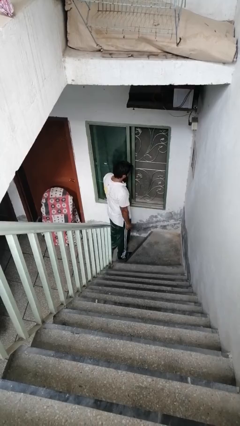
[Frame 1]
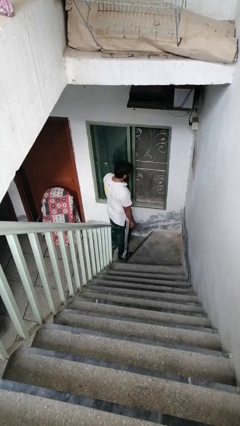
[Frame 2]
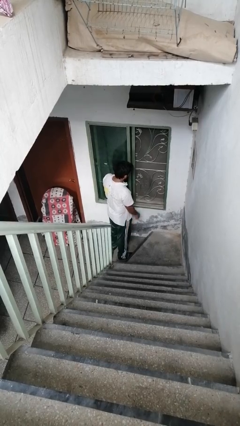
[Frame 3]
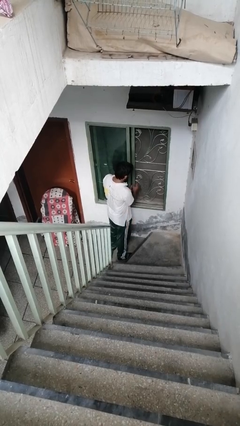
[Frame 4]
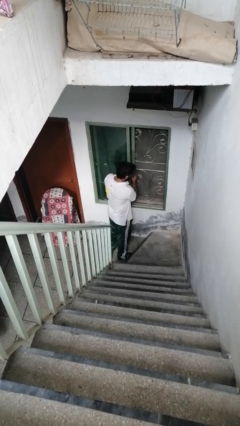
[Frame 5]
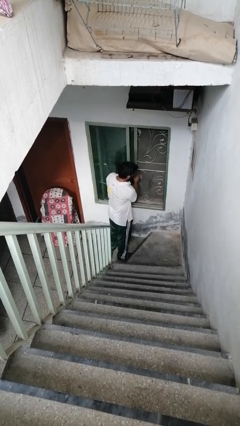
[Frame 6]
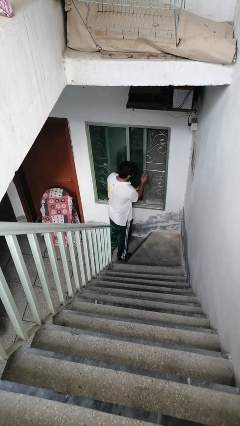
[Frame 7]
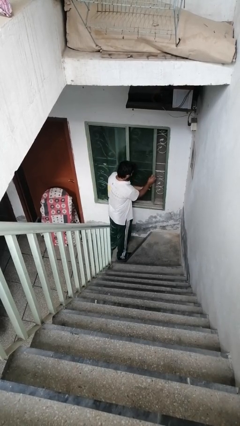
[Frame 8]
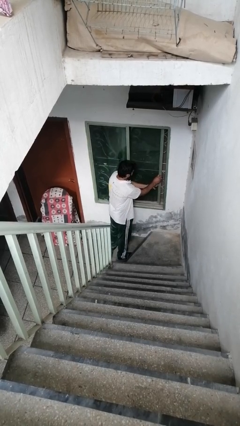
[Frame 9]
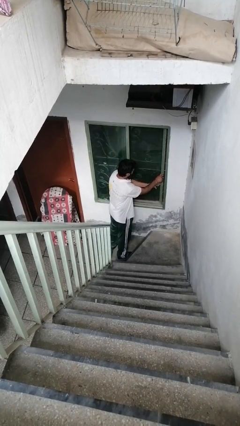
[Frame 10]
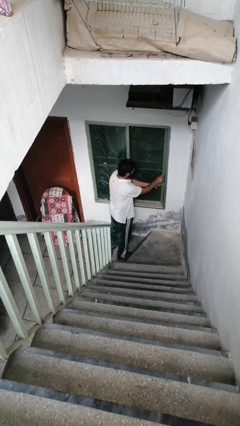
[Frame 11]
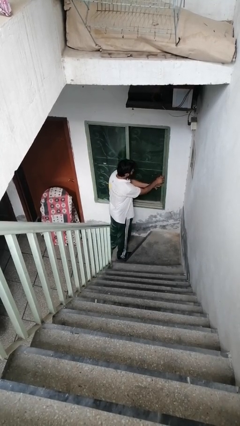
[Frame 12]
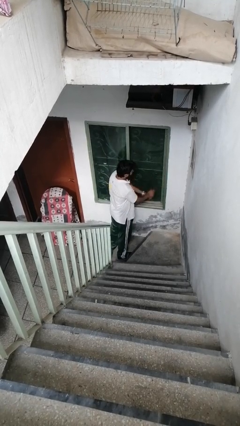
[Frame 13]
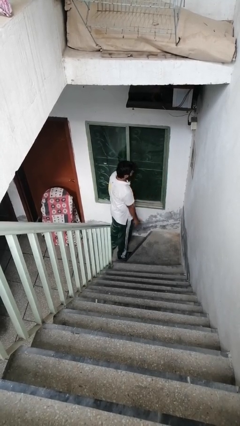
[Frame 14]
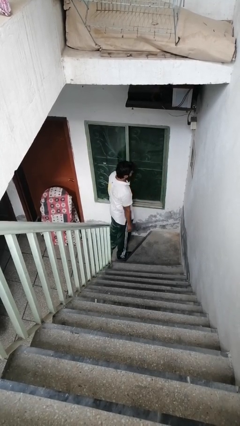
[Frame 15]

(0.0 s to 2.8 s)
person closes home window

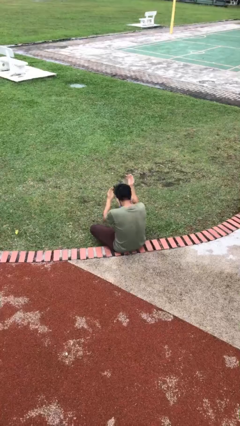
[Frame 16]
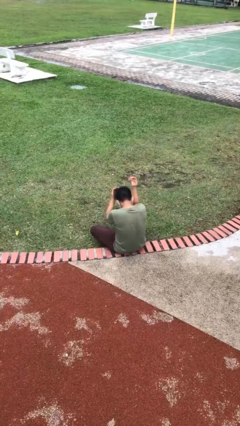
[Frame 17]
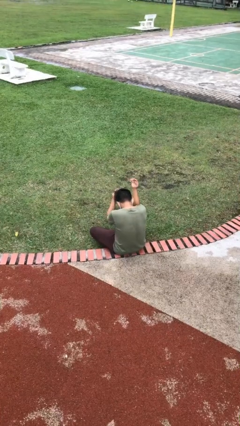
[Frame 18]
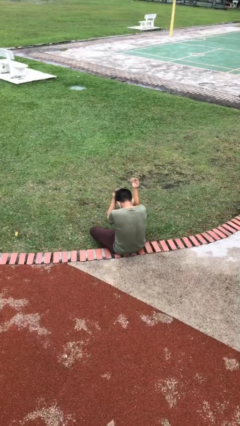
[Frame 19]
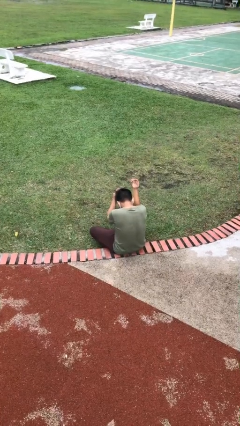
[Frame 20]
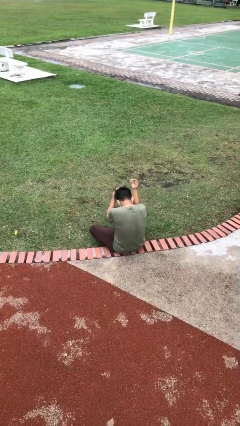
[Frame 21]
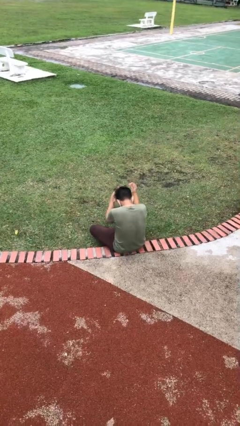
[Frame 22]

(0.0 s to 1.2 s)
person prays

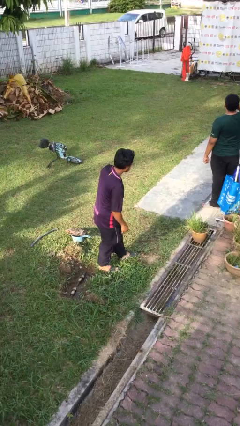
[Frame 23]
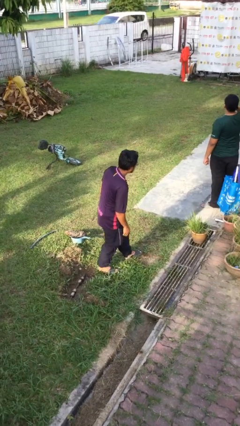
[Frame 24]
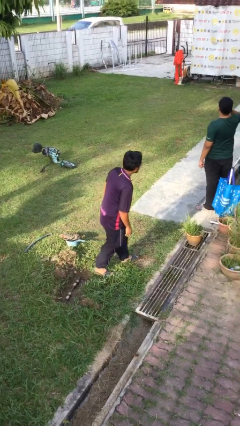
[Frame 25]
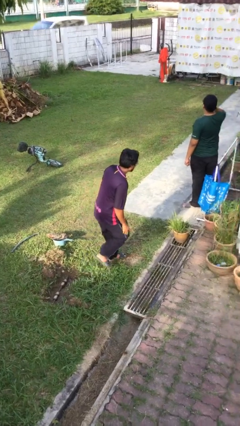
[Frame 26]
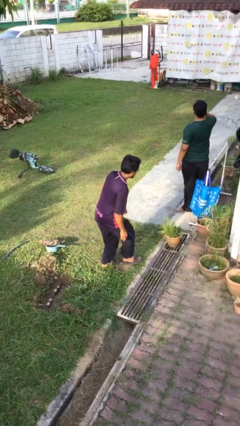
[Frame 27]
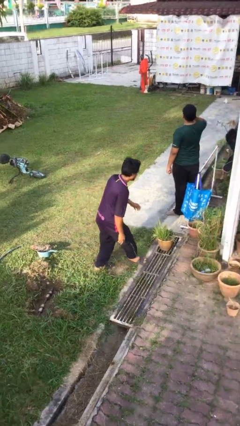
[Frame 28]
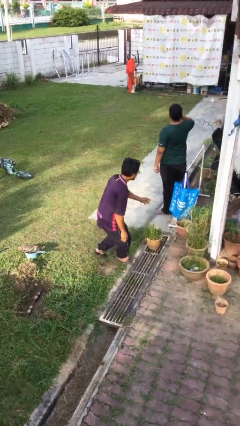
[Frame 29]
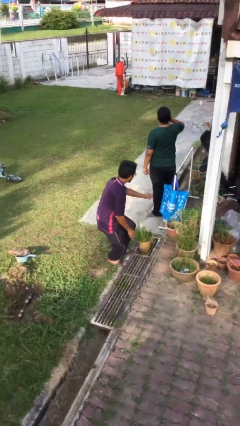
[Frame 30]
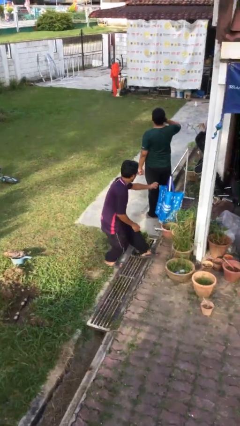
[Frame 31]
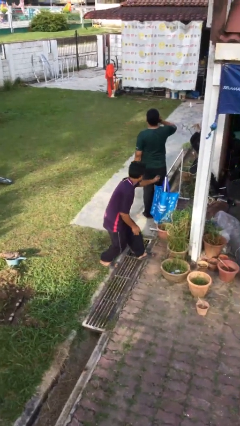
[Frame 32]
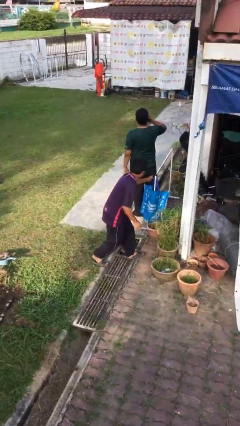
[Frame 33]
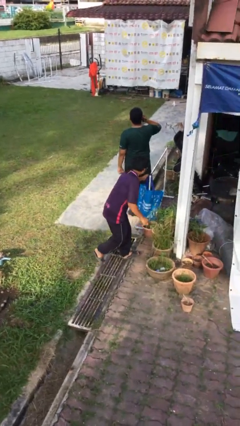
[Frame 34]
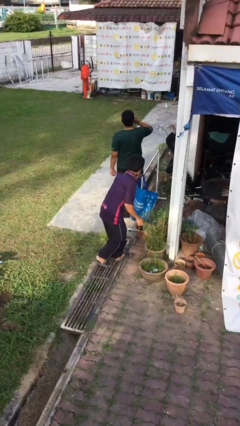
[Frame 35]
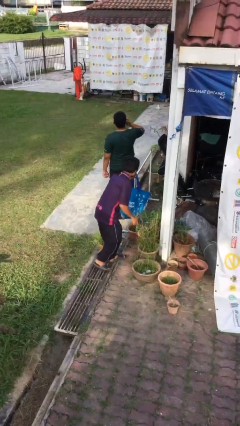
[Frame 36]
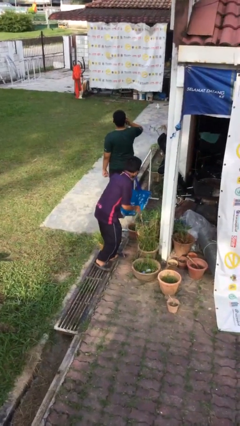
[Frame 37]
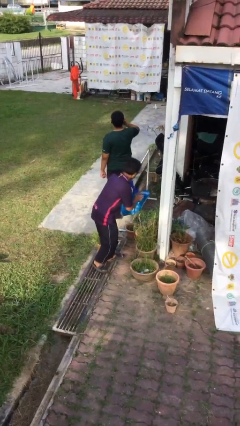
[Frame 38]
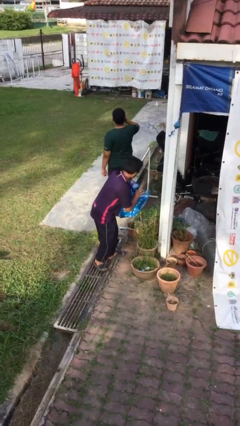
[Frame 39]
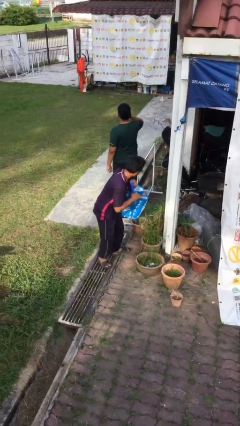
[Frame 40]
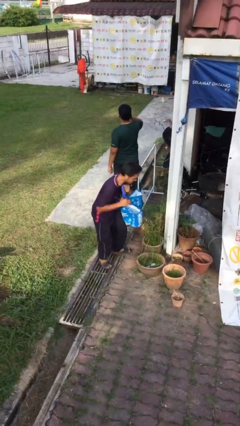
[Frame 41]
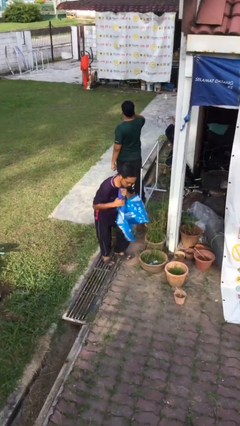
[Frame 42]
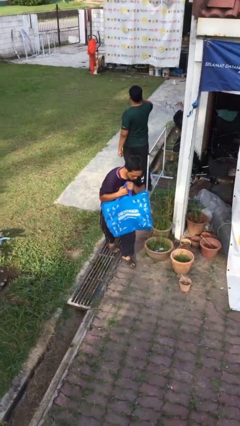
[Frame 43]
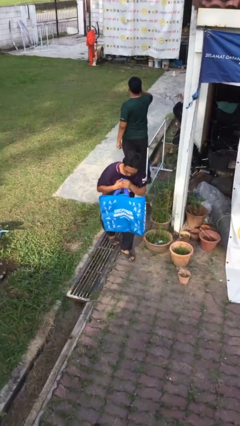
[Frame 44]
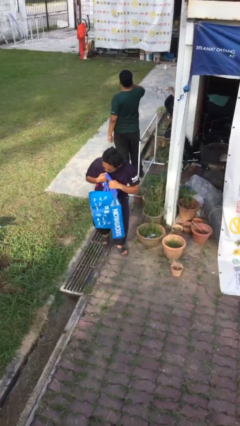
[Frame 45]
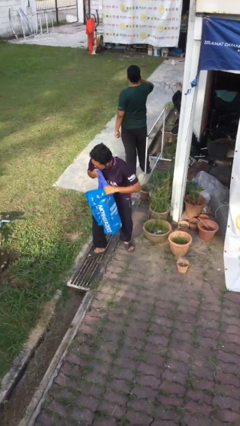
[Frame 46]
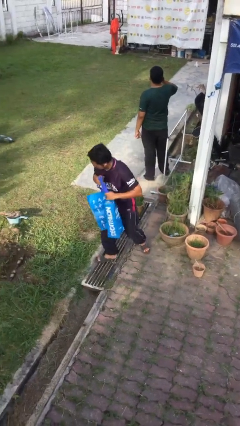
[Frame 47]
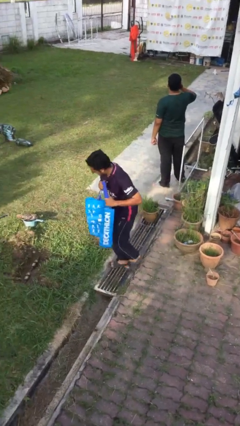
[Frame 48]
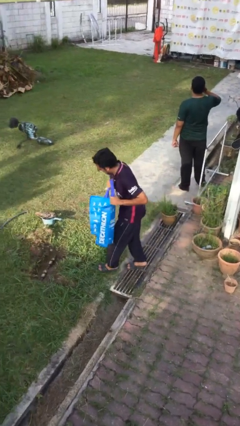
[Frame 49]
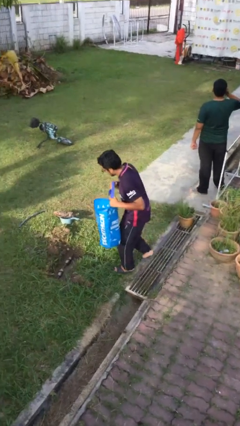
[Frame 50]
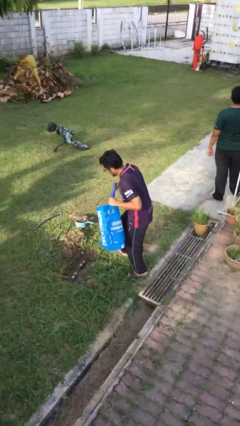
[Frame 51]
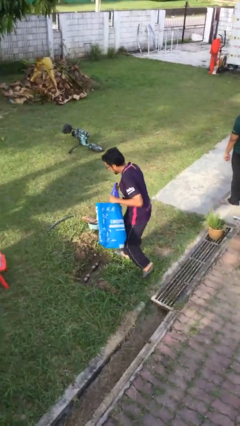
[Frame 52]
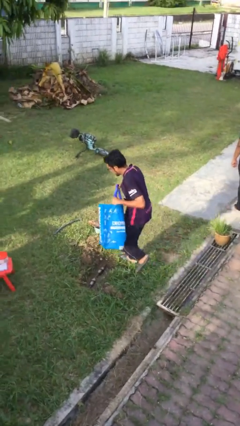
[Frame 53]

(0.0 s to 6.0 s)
person steals object from person

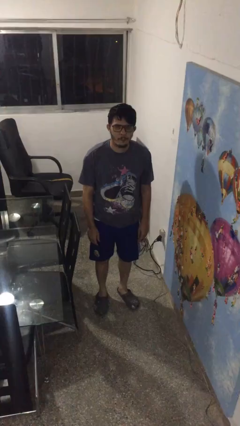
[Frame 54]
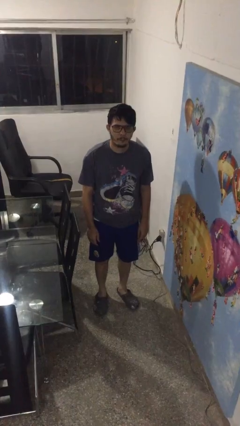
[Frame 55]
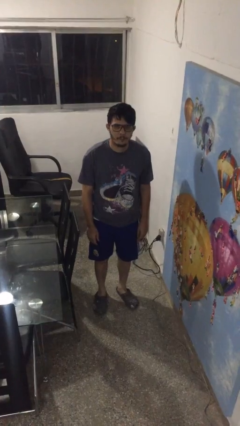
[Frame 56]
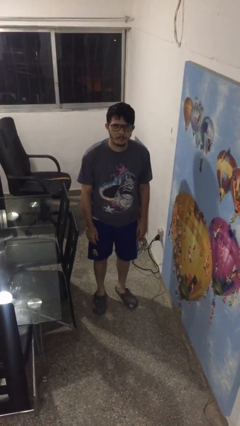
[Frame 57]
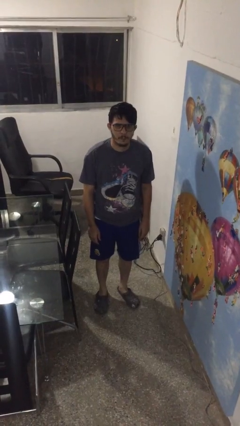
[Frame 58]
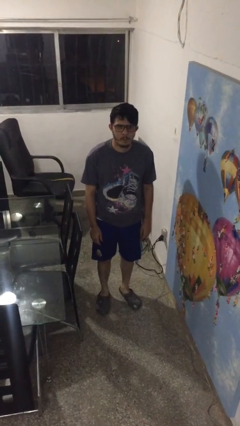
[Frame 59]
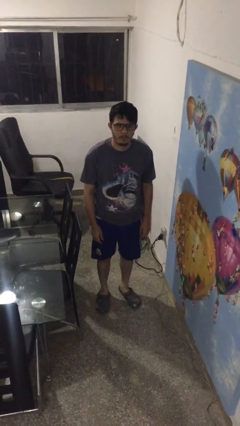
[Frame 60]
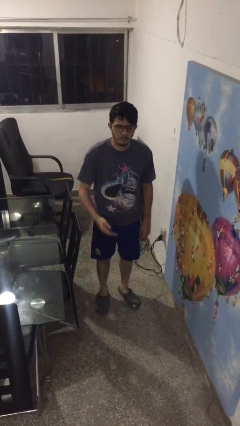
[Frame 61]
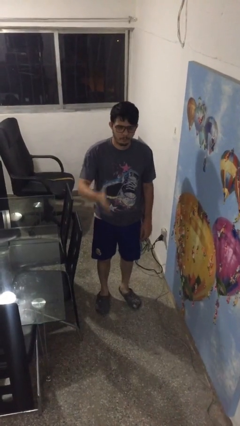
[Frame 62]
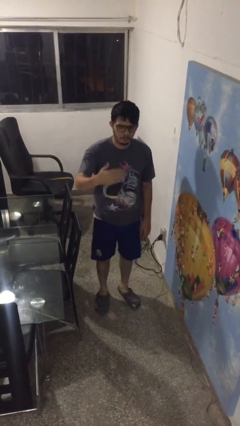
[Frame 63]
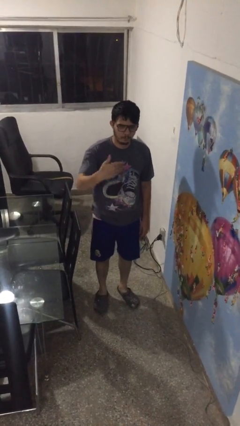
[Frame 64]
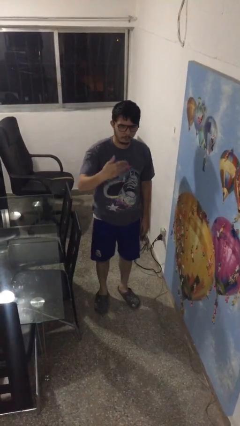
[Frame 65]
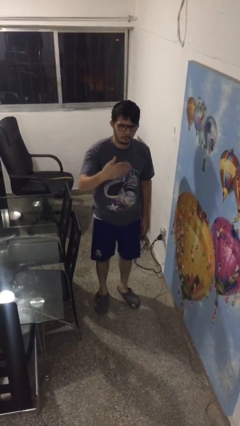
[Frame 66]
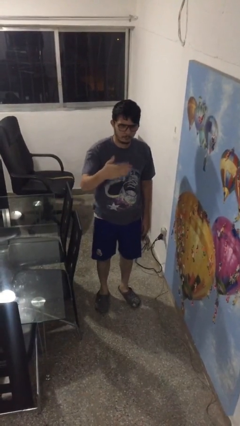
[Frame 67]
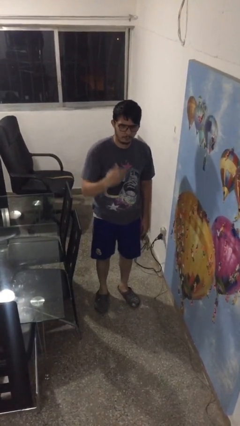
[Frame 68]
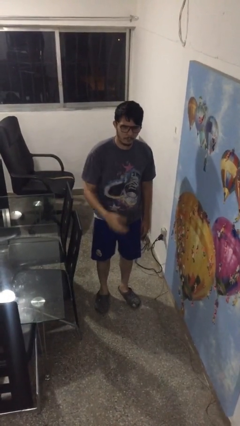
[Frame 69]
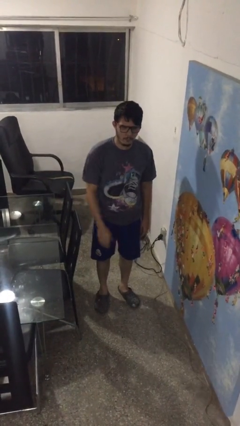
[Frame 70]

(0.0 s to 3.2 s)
person gestures come here

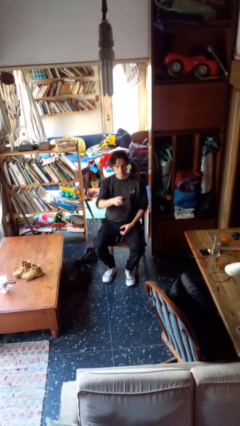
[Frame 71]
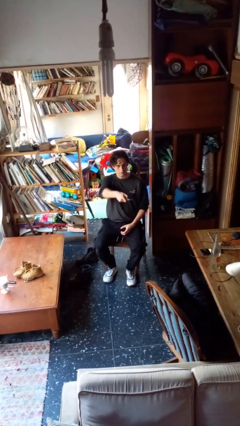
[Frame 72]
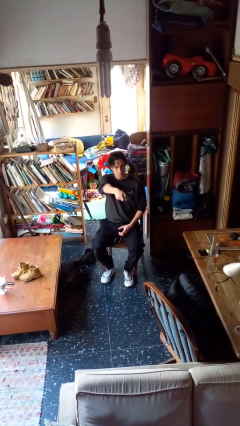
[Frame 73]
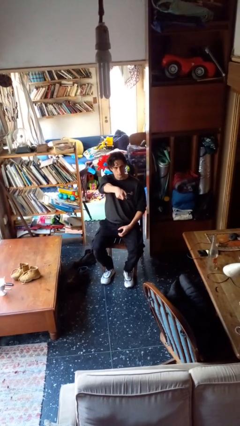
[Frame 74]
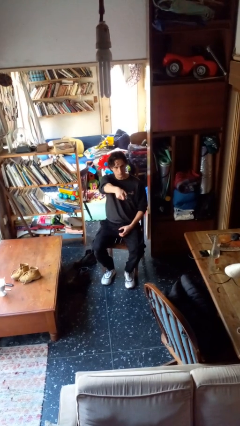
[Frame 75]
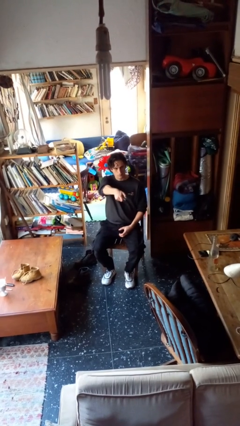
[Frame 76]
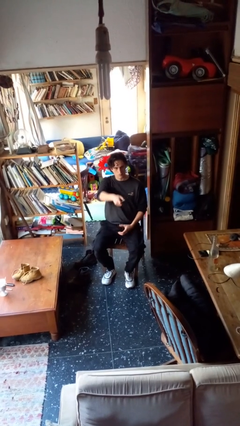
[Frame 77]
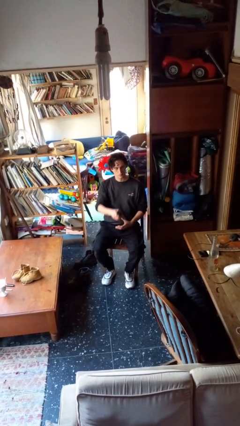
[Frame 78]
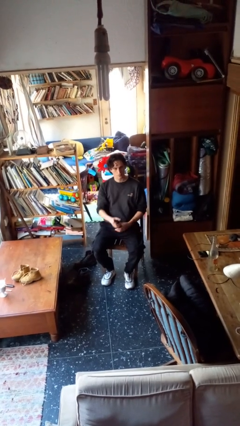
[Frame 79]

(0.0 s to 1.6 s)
person uses television remote

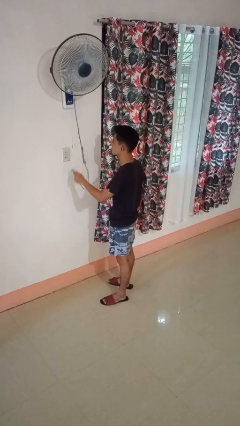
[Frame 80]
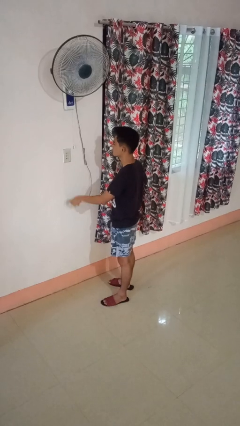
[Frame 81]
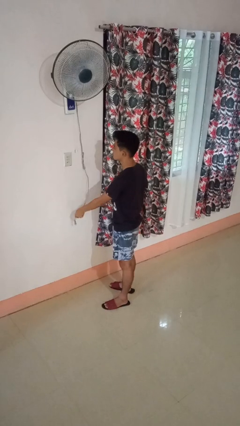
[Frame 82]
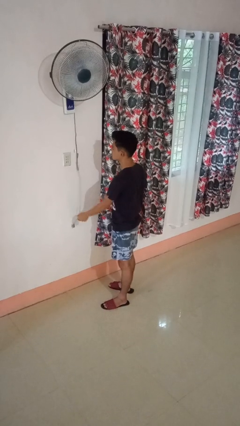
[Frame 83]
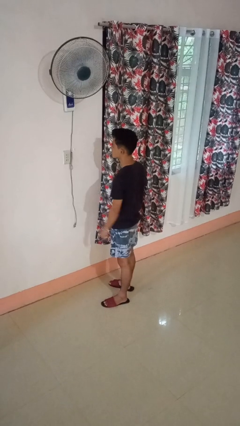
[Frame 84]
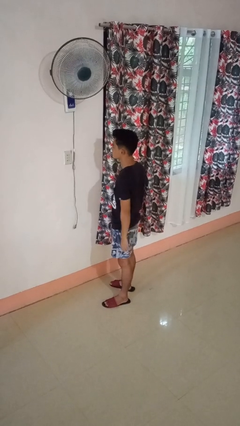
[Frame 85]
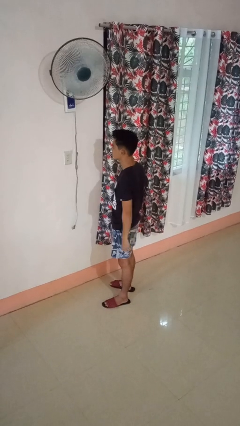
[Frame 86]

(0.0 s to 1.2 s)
person unplugs from electrical socket

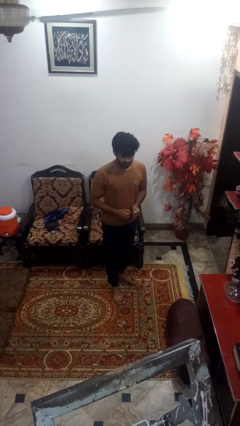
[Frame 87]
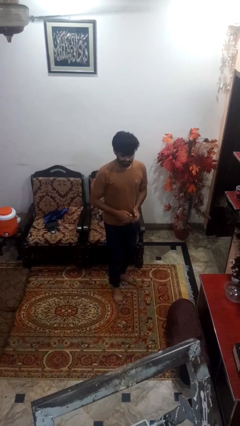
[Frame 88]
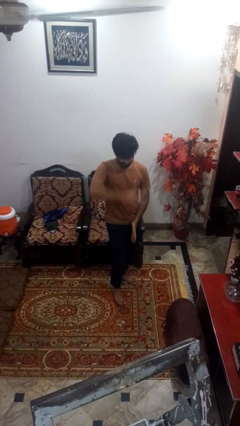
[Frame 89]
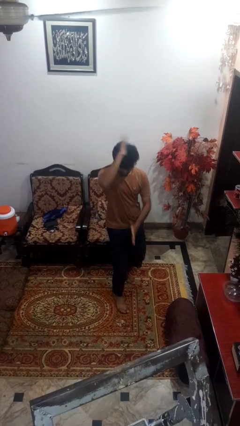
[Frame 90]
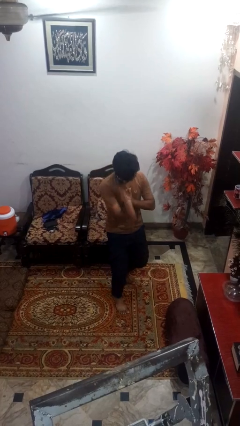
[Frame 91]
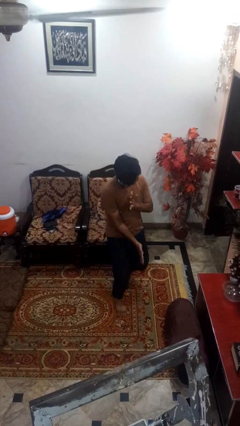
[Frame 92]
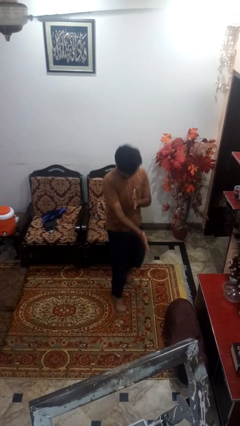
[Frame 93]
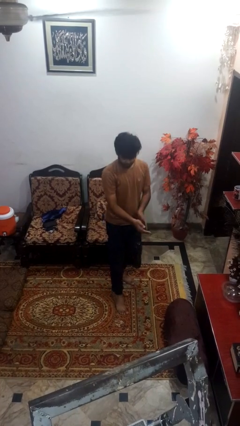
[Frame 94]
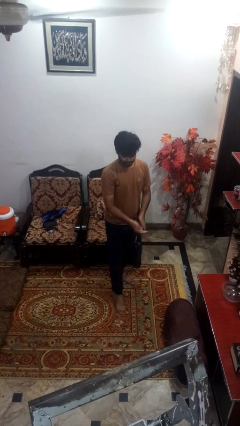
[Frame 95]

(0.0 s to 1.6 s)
person karate chop
